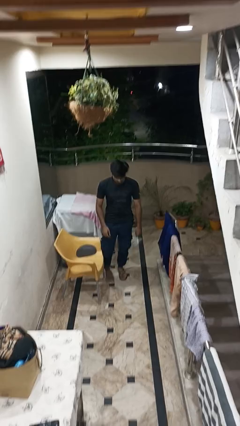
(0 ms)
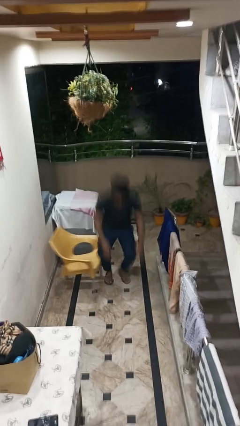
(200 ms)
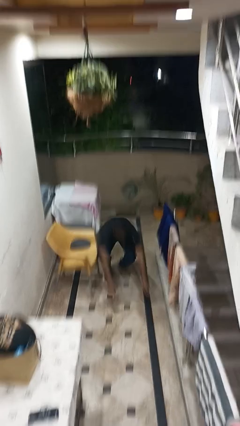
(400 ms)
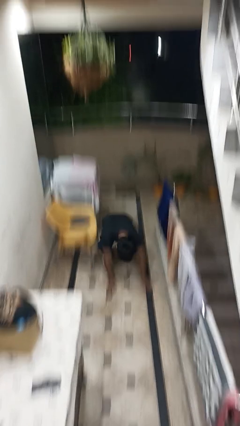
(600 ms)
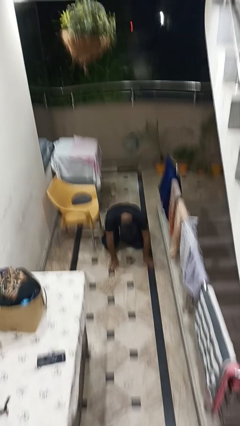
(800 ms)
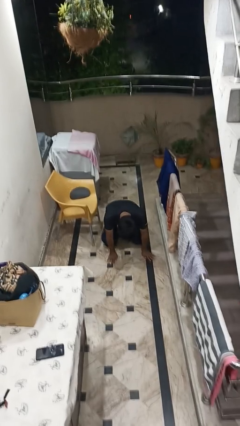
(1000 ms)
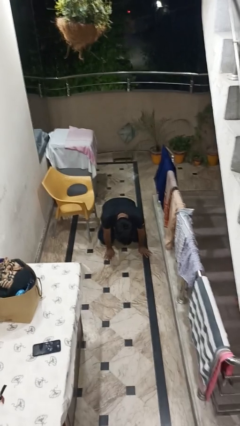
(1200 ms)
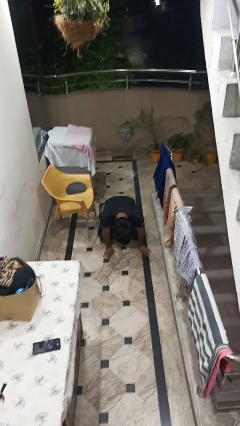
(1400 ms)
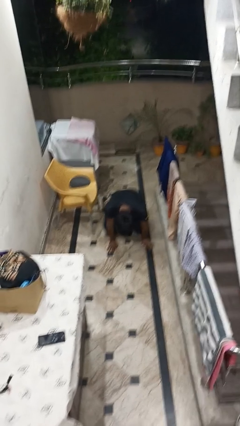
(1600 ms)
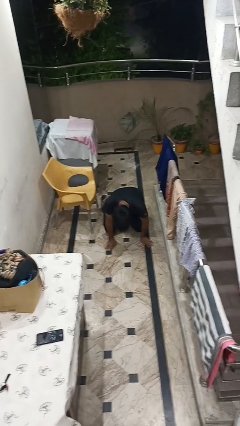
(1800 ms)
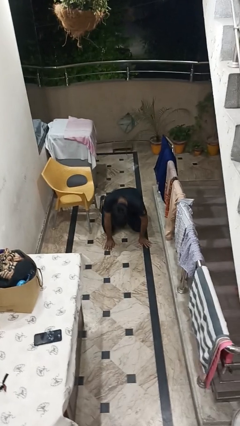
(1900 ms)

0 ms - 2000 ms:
person trips on object on floor

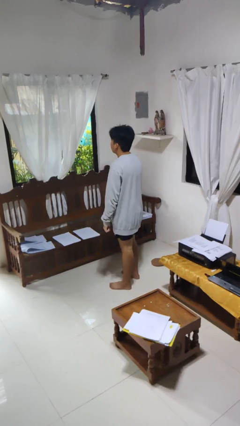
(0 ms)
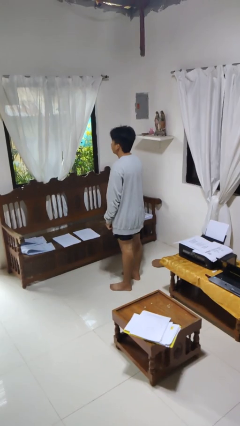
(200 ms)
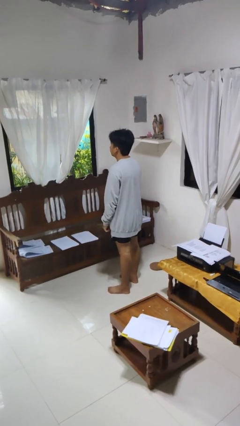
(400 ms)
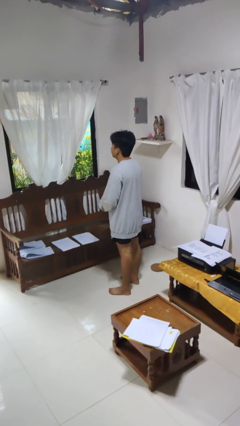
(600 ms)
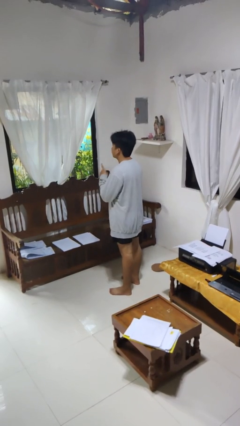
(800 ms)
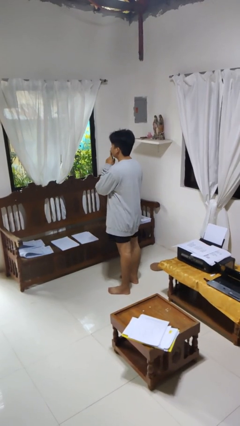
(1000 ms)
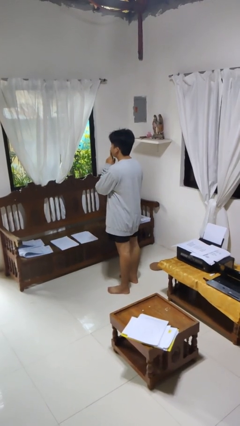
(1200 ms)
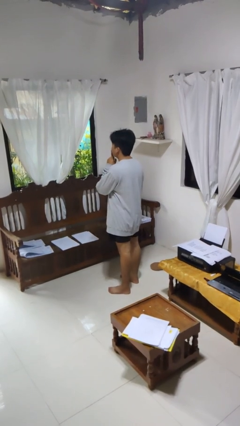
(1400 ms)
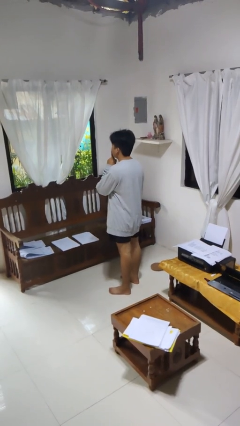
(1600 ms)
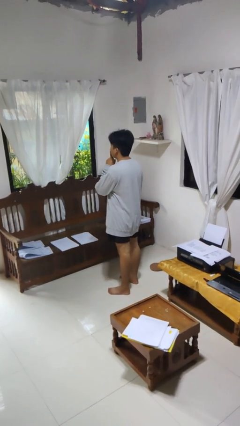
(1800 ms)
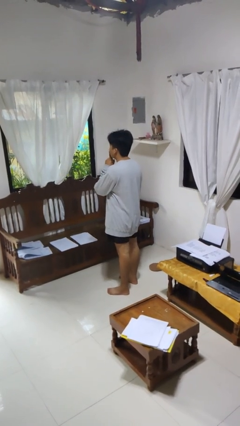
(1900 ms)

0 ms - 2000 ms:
person gestures be quiet

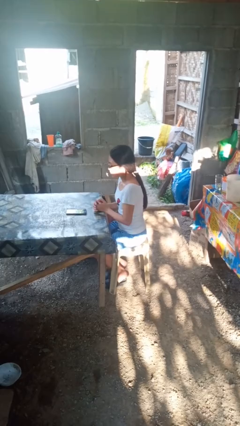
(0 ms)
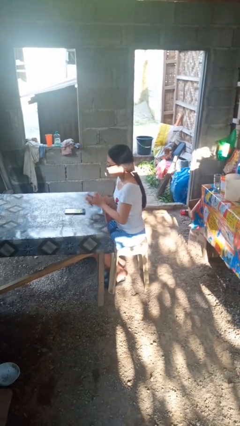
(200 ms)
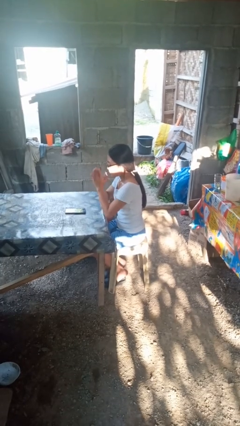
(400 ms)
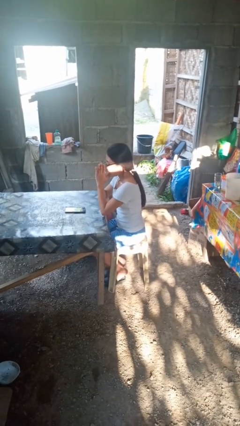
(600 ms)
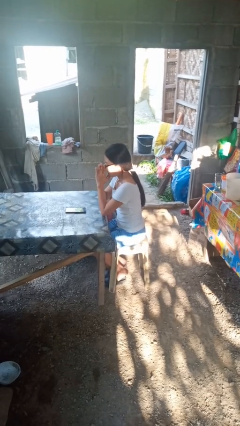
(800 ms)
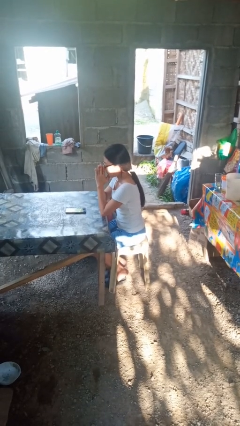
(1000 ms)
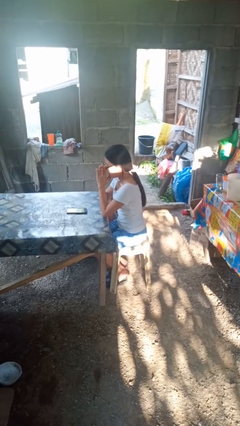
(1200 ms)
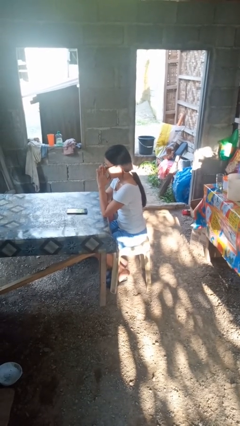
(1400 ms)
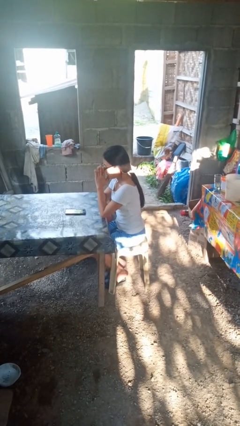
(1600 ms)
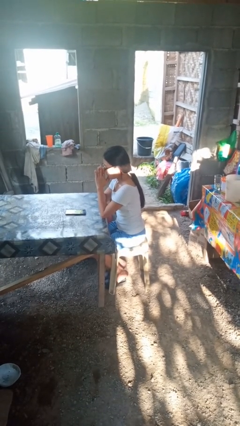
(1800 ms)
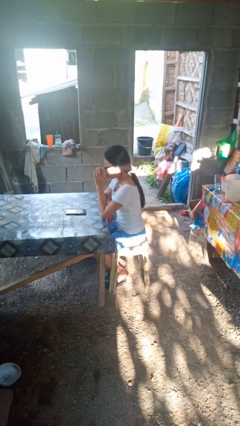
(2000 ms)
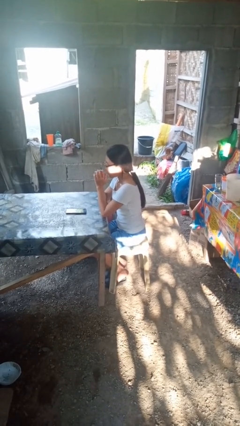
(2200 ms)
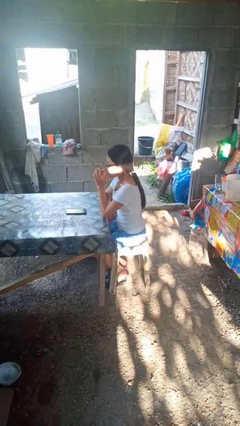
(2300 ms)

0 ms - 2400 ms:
person prays

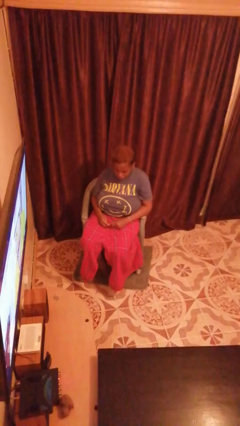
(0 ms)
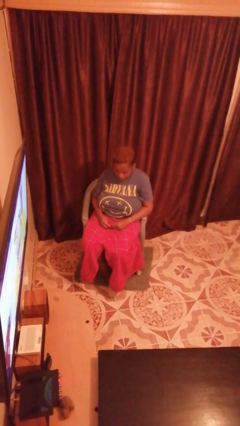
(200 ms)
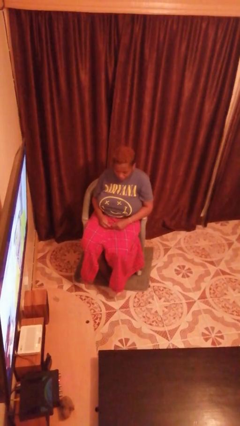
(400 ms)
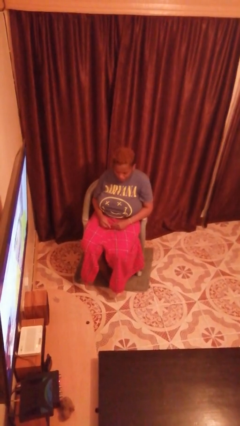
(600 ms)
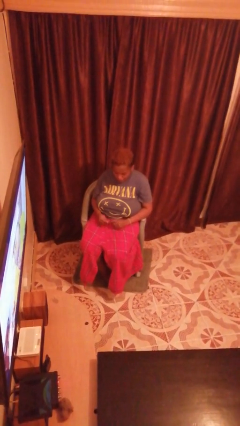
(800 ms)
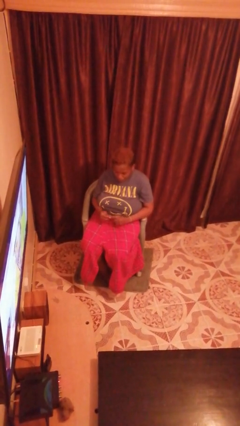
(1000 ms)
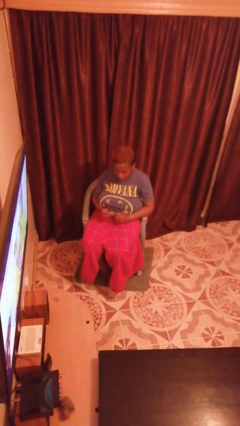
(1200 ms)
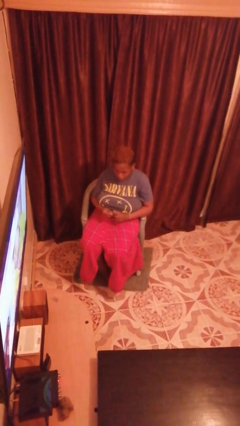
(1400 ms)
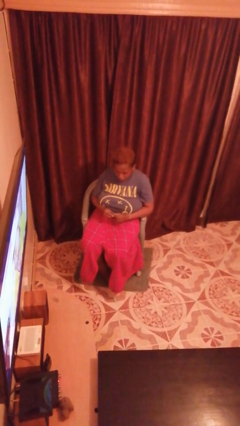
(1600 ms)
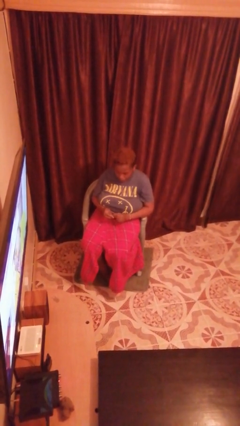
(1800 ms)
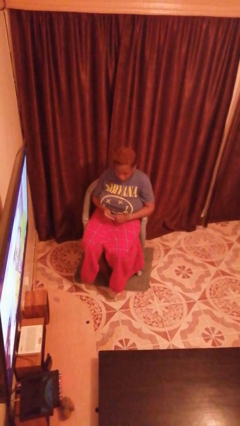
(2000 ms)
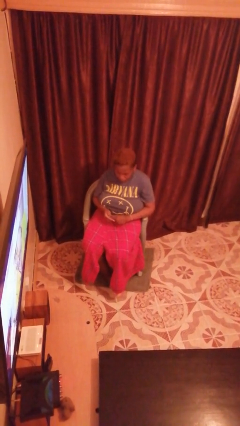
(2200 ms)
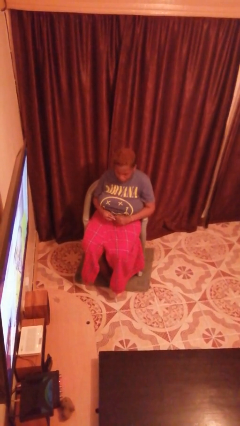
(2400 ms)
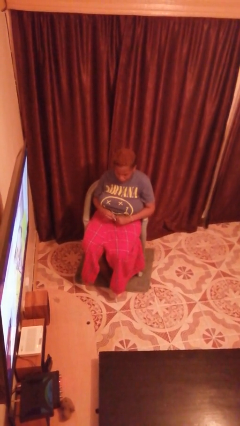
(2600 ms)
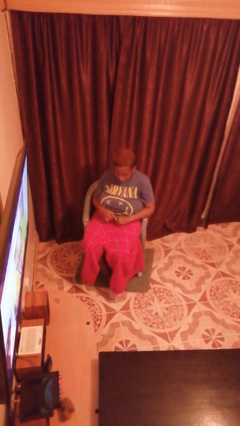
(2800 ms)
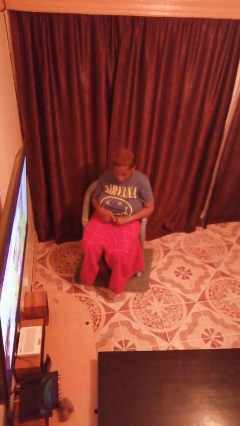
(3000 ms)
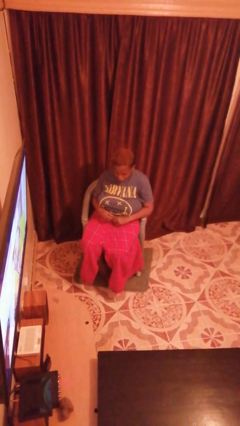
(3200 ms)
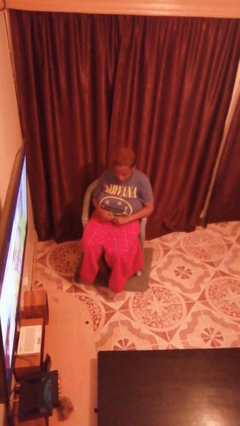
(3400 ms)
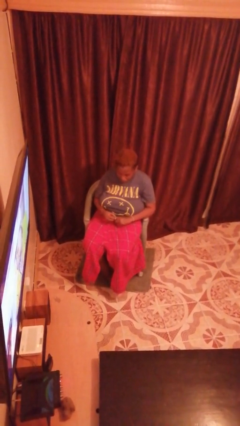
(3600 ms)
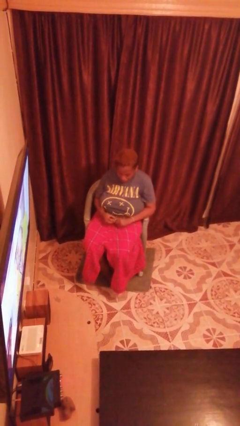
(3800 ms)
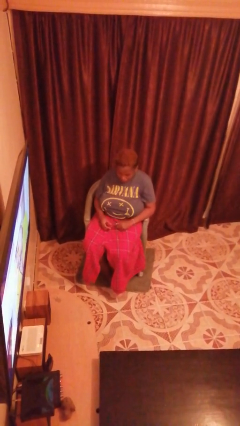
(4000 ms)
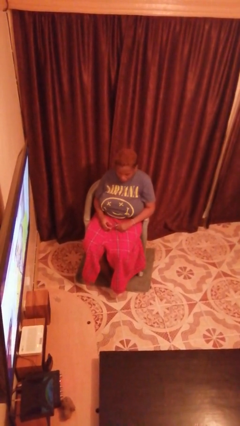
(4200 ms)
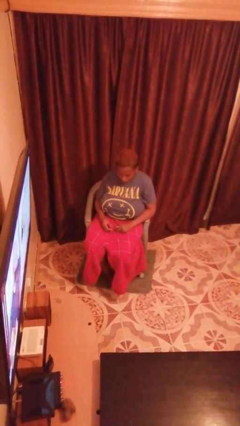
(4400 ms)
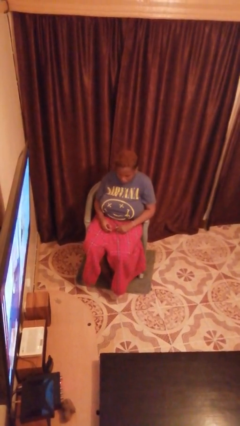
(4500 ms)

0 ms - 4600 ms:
person puts on ring

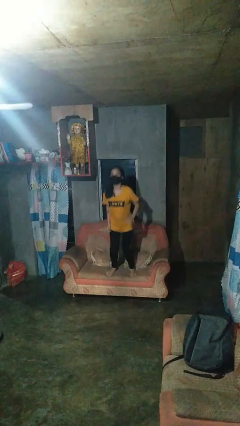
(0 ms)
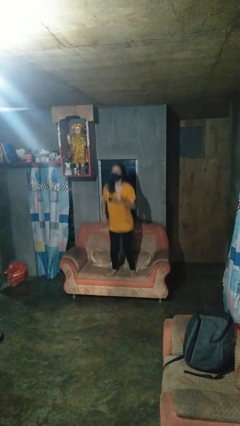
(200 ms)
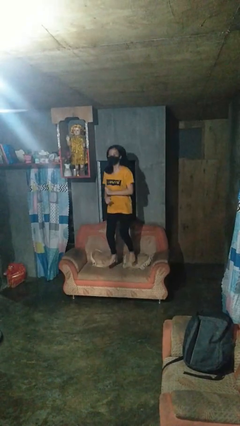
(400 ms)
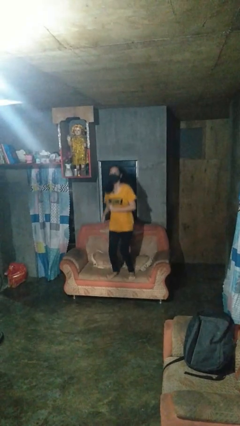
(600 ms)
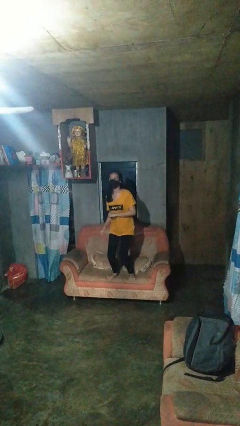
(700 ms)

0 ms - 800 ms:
person jumps on couch

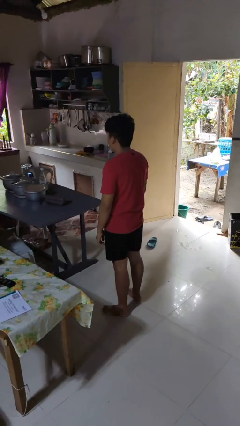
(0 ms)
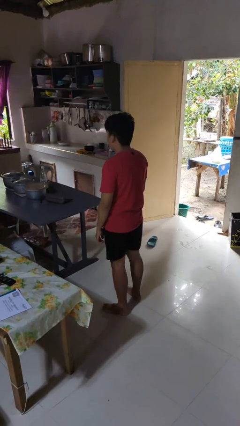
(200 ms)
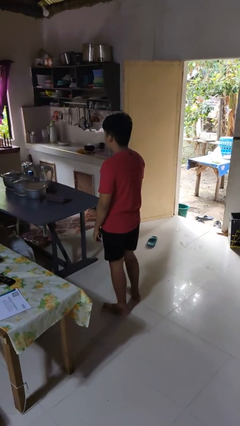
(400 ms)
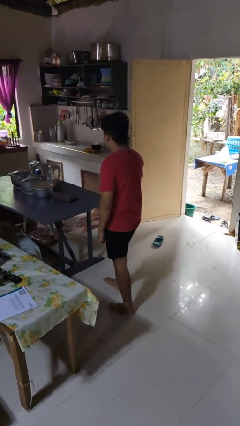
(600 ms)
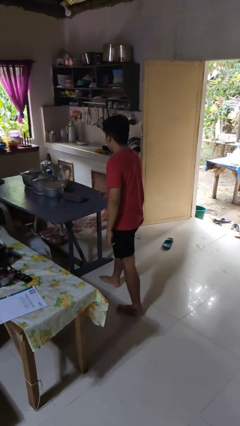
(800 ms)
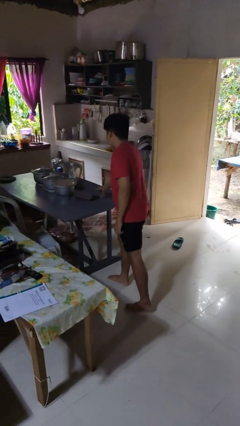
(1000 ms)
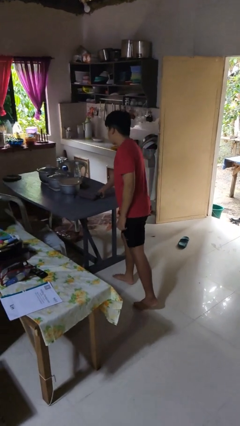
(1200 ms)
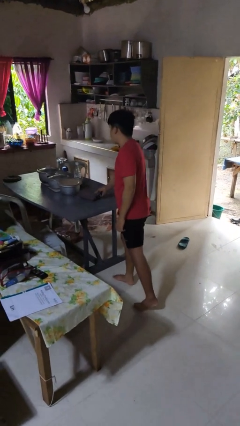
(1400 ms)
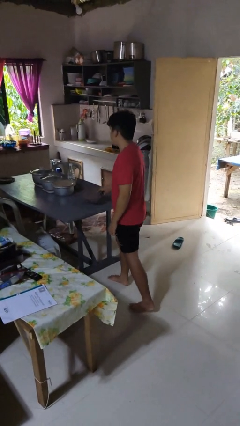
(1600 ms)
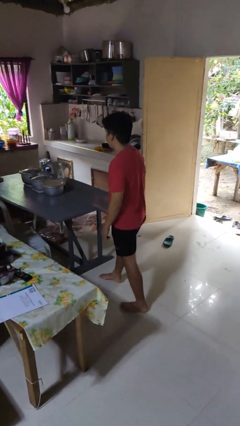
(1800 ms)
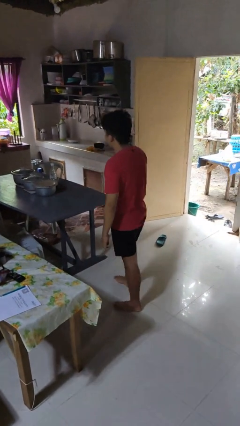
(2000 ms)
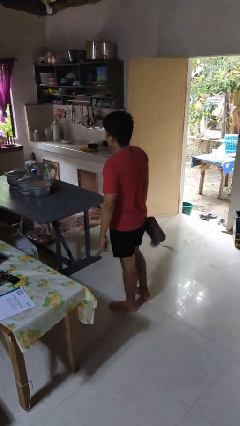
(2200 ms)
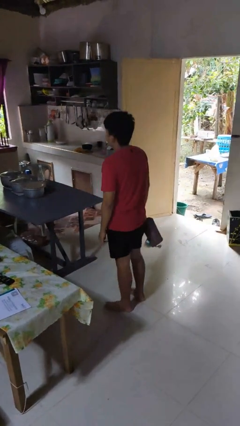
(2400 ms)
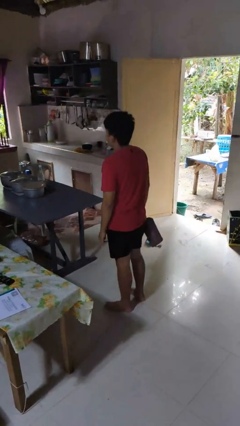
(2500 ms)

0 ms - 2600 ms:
person picks up object from table

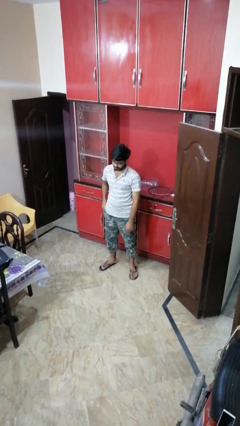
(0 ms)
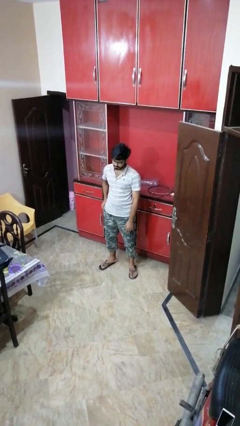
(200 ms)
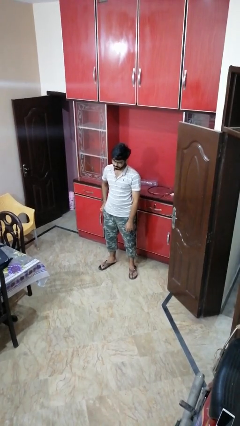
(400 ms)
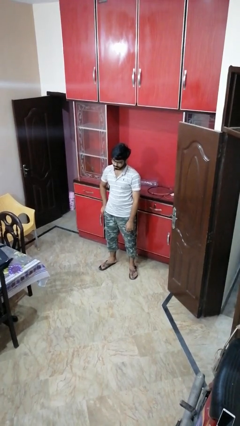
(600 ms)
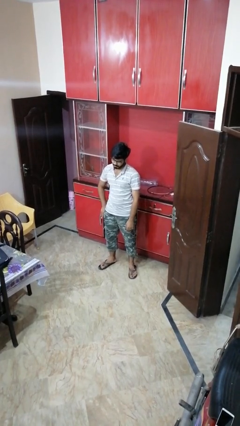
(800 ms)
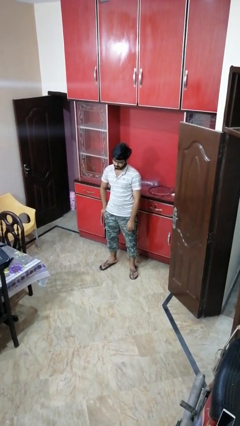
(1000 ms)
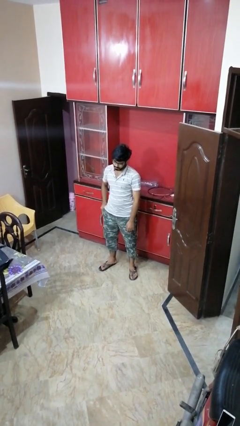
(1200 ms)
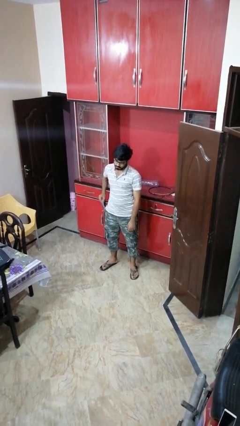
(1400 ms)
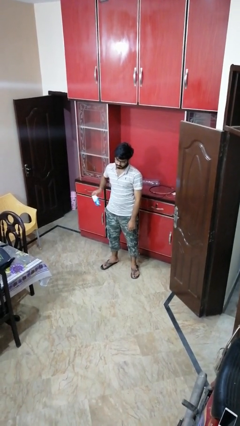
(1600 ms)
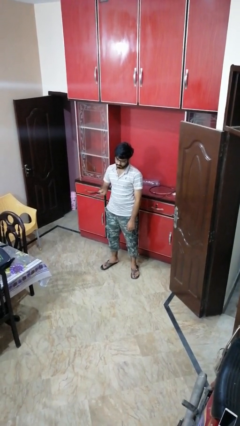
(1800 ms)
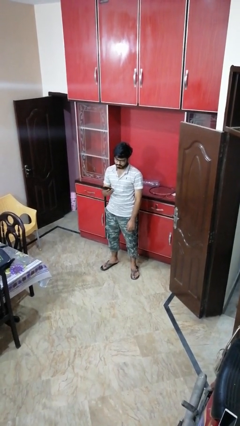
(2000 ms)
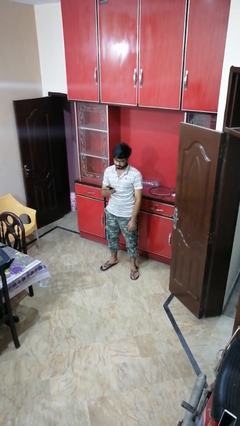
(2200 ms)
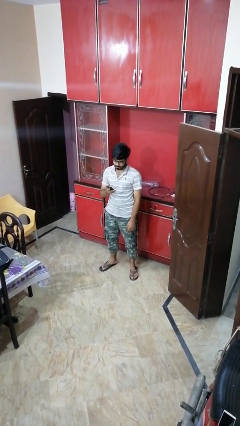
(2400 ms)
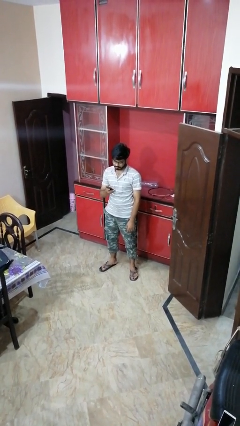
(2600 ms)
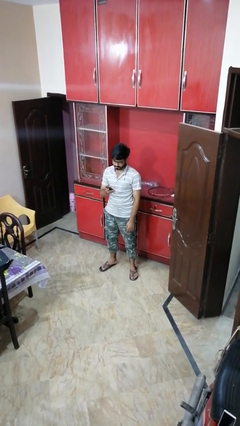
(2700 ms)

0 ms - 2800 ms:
person takes phone from pocket
